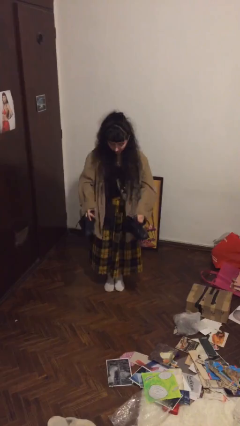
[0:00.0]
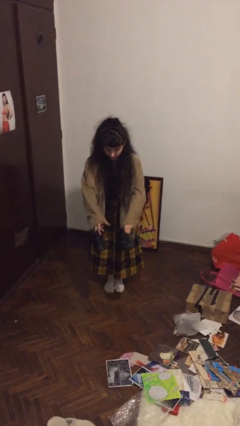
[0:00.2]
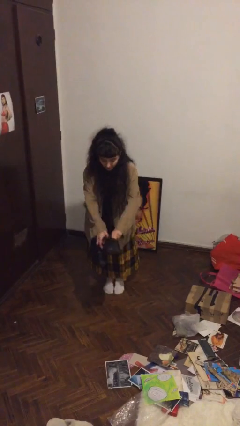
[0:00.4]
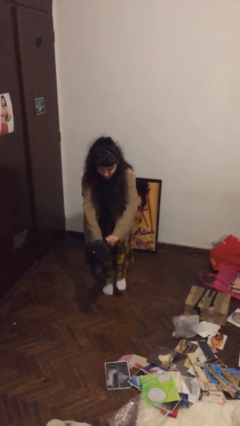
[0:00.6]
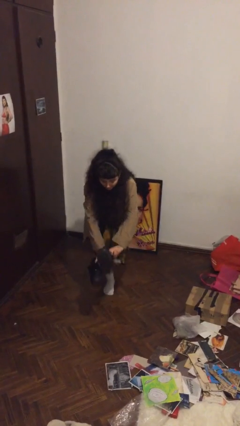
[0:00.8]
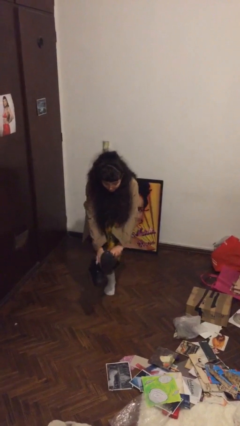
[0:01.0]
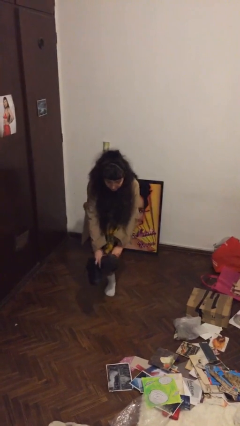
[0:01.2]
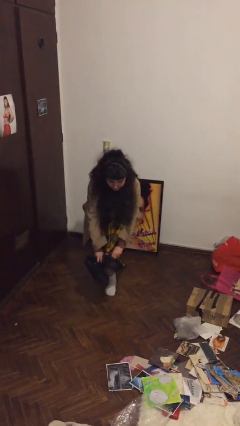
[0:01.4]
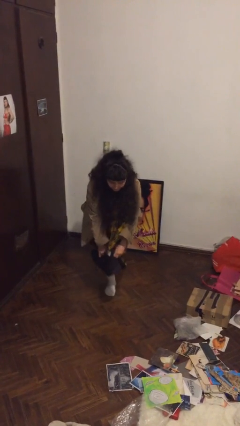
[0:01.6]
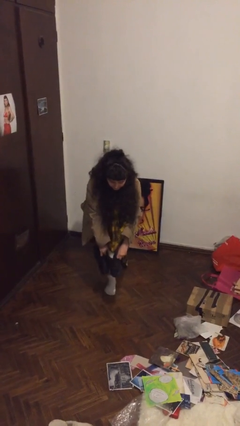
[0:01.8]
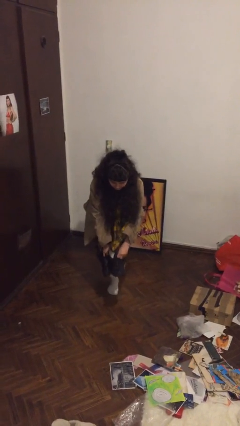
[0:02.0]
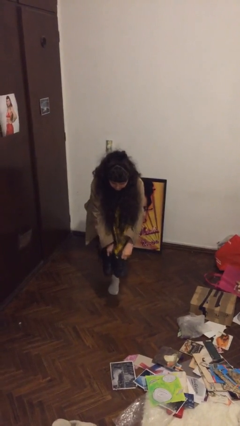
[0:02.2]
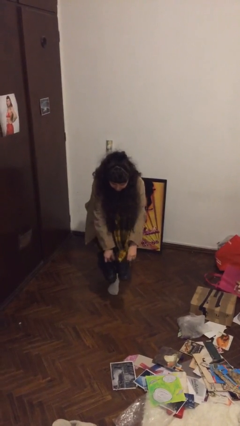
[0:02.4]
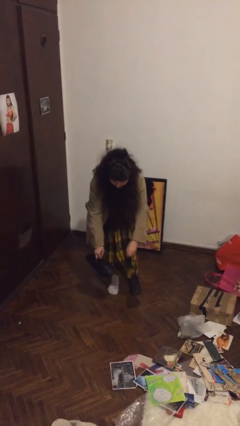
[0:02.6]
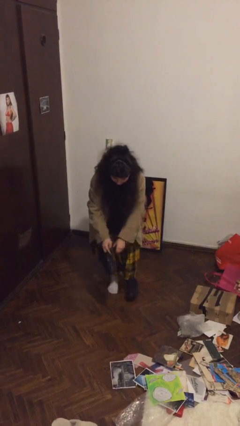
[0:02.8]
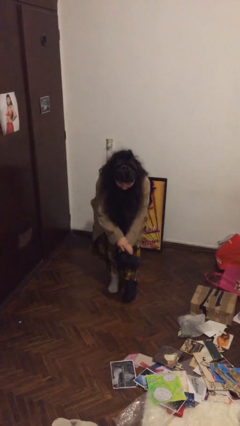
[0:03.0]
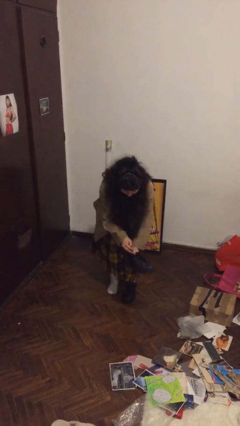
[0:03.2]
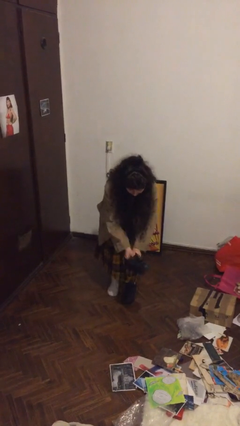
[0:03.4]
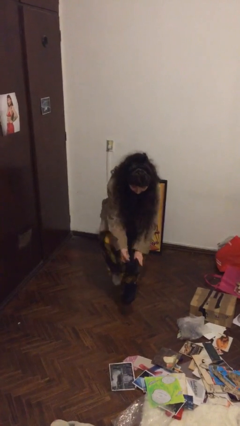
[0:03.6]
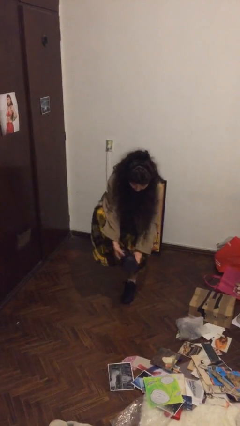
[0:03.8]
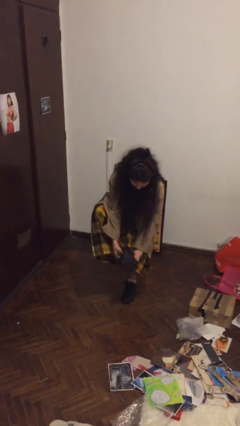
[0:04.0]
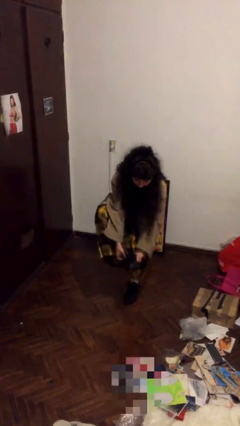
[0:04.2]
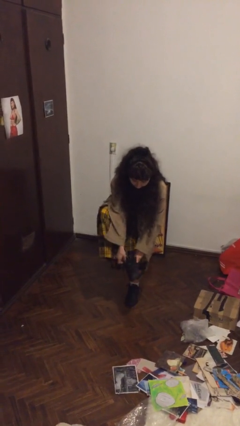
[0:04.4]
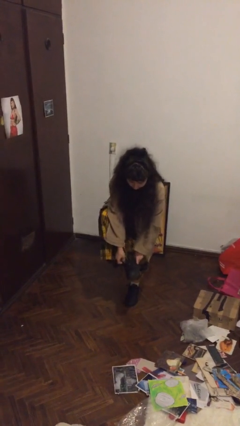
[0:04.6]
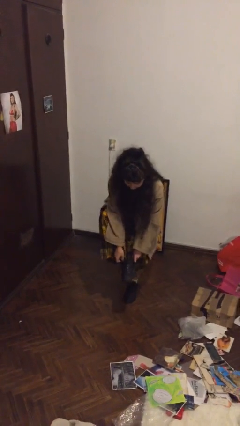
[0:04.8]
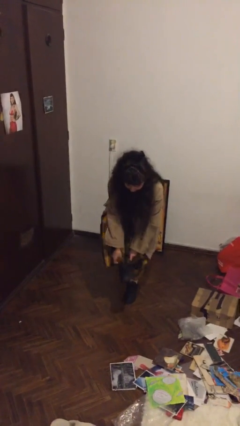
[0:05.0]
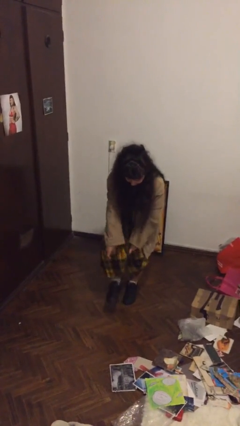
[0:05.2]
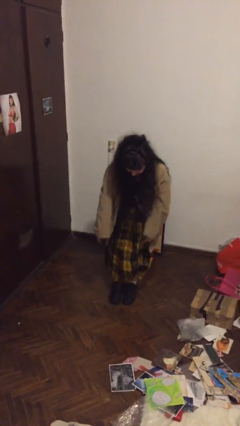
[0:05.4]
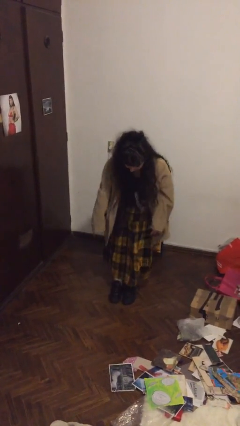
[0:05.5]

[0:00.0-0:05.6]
person puts on shoes

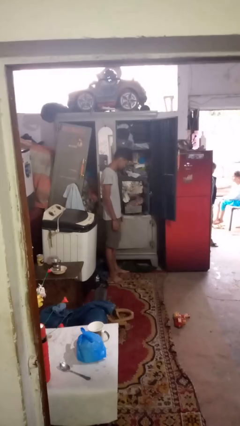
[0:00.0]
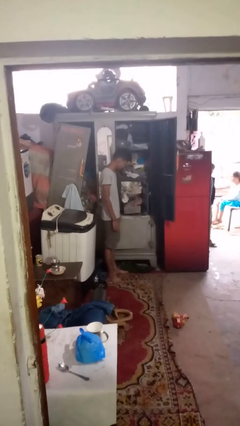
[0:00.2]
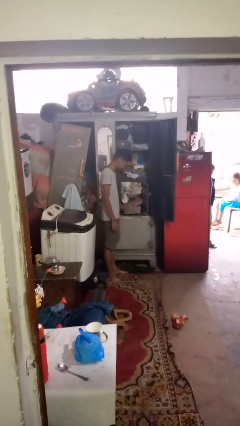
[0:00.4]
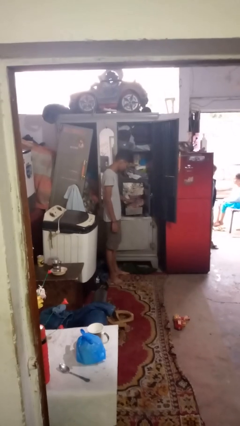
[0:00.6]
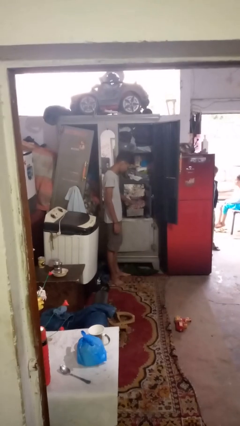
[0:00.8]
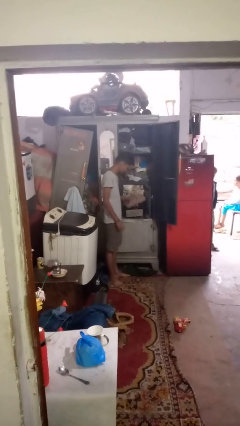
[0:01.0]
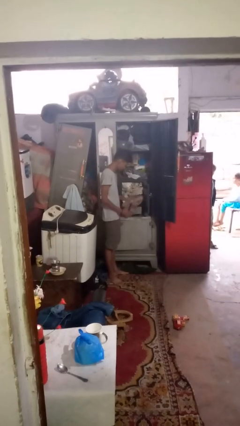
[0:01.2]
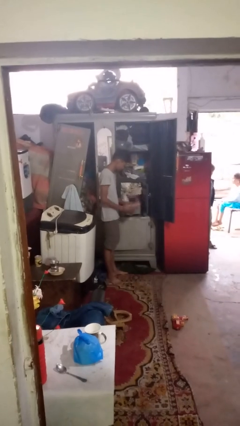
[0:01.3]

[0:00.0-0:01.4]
person takes clothes from dresser

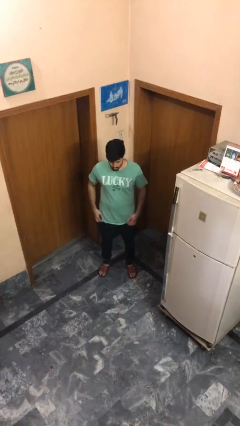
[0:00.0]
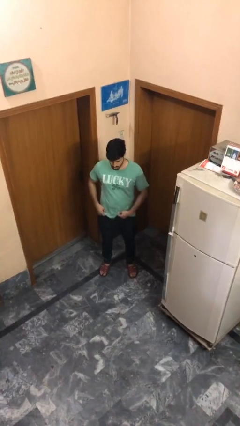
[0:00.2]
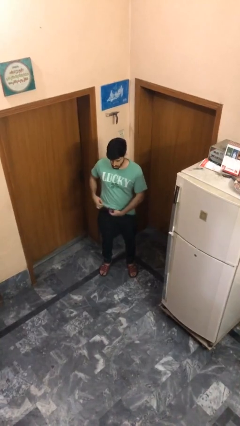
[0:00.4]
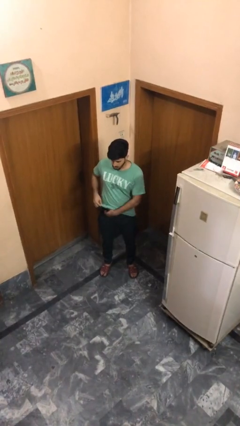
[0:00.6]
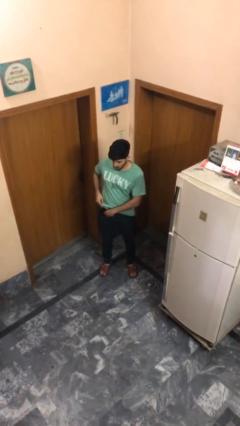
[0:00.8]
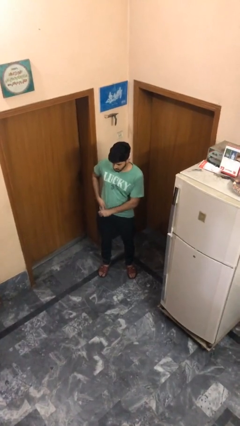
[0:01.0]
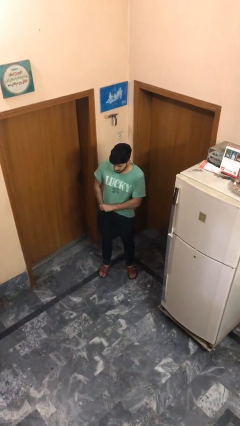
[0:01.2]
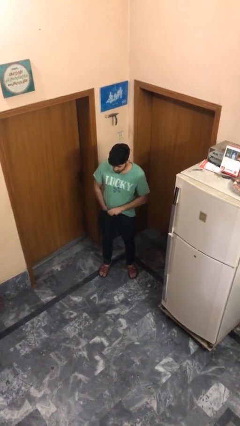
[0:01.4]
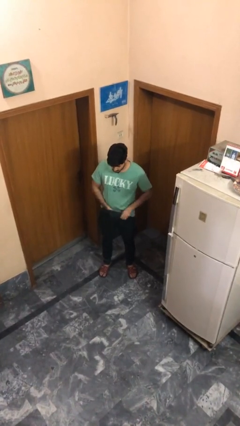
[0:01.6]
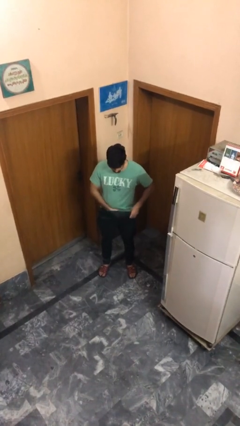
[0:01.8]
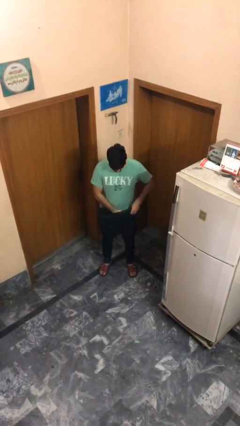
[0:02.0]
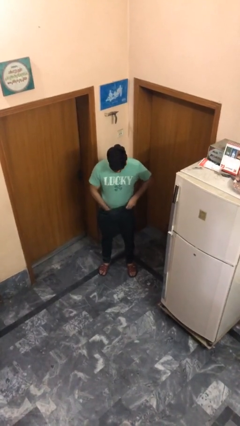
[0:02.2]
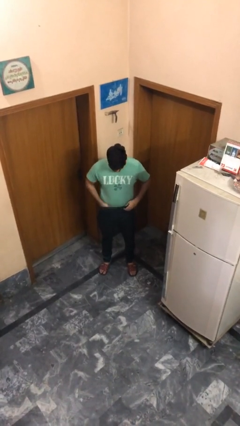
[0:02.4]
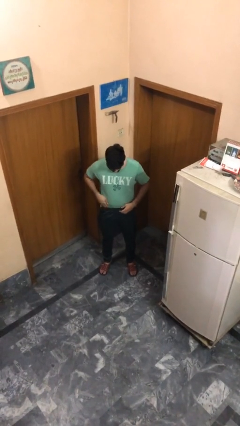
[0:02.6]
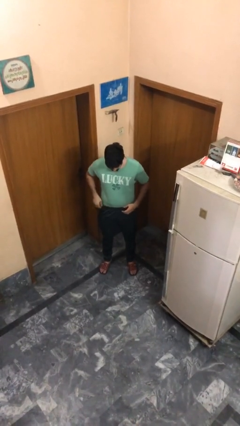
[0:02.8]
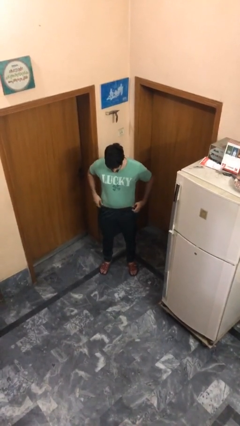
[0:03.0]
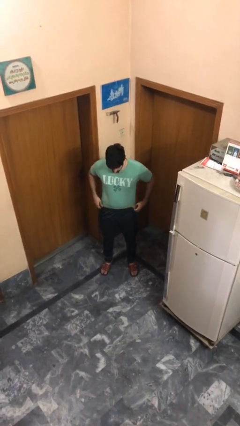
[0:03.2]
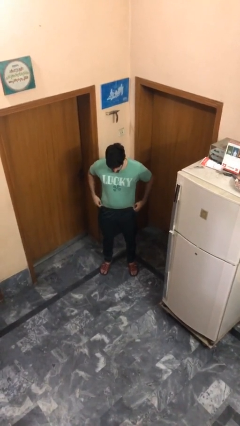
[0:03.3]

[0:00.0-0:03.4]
person tucks in shirt

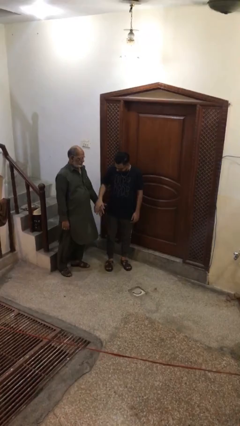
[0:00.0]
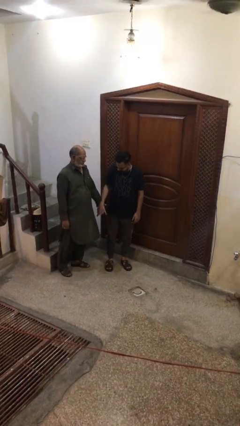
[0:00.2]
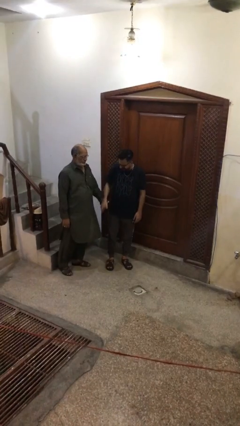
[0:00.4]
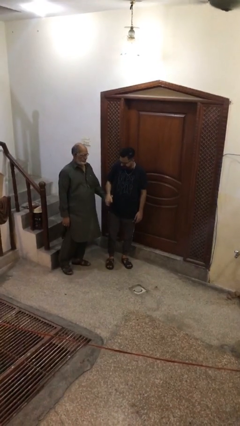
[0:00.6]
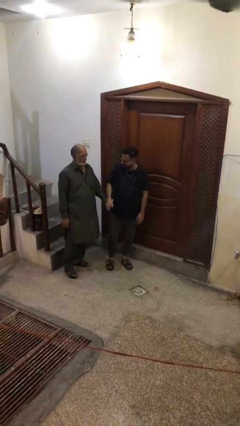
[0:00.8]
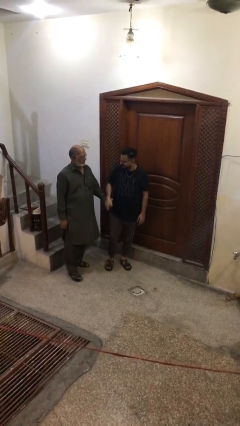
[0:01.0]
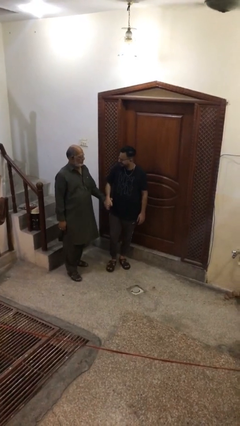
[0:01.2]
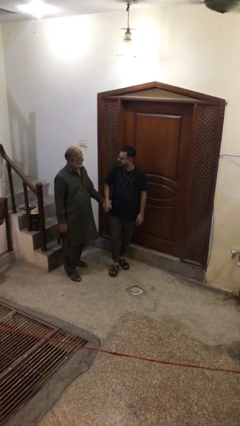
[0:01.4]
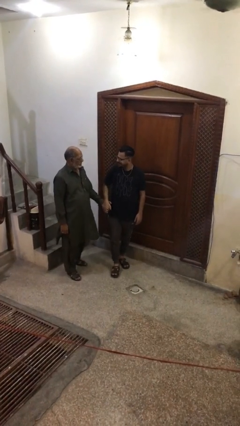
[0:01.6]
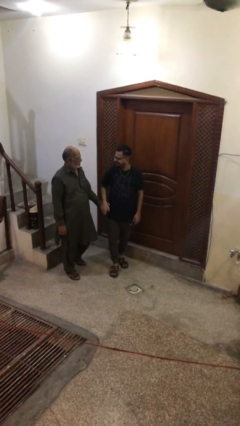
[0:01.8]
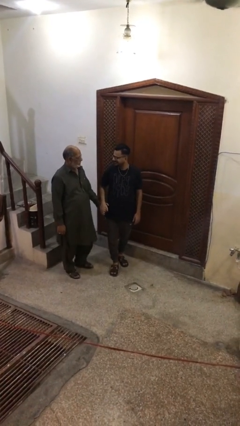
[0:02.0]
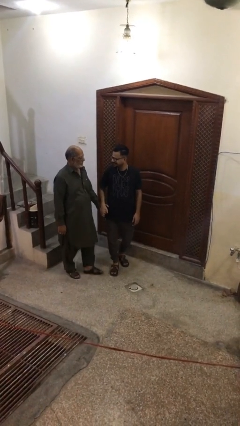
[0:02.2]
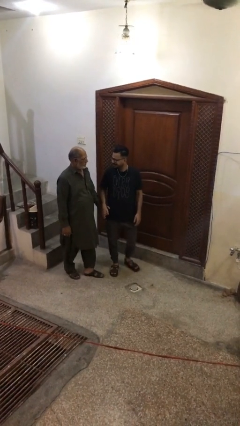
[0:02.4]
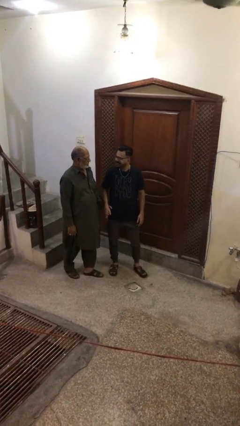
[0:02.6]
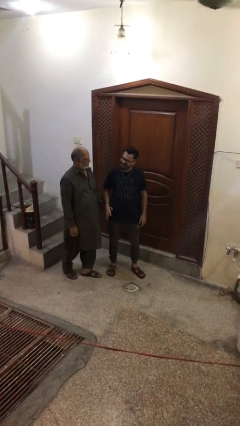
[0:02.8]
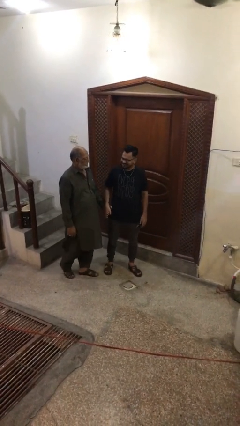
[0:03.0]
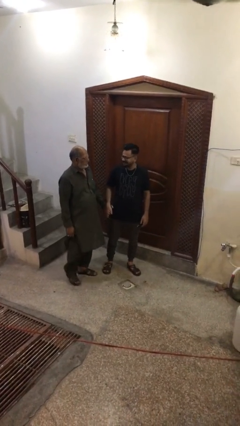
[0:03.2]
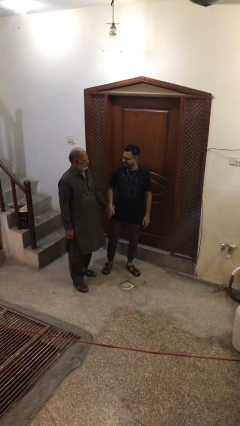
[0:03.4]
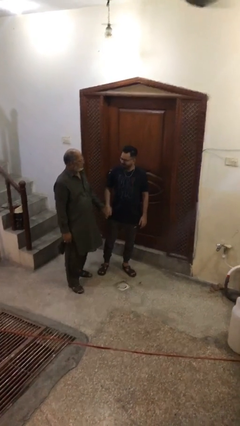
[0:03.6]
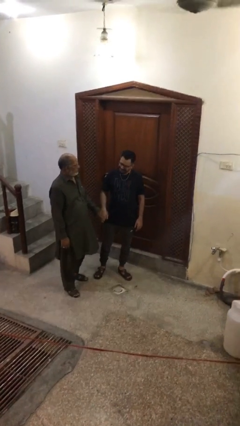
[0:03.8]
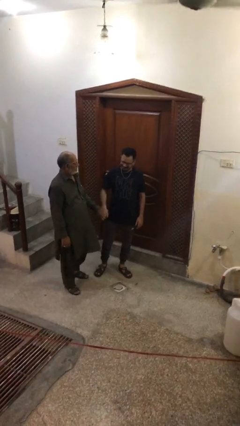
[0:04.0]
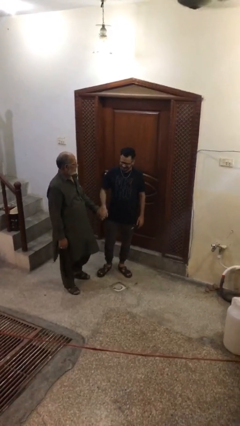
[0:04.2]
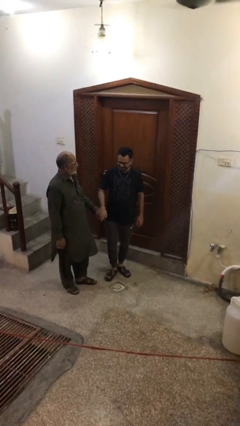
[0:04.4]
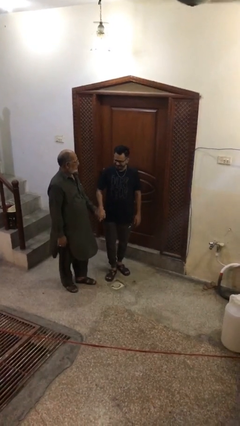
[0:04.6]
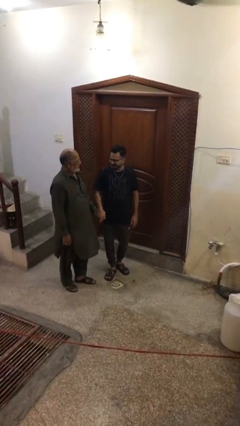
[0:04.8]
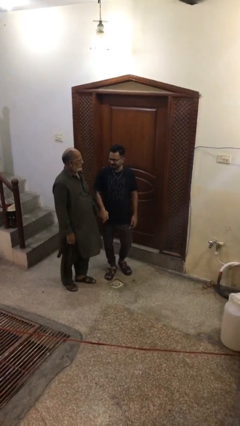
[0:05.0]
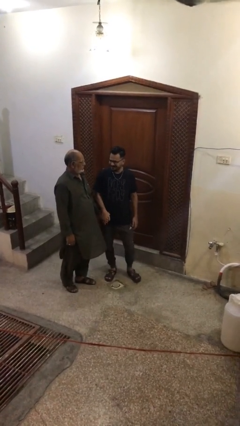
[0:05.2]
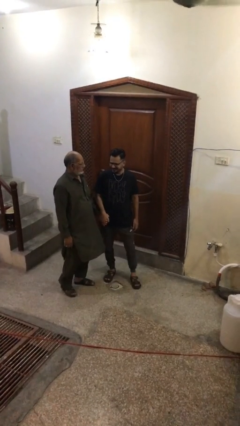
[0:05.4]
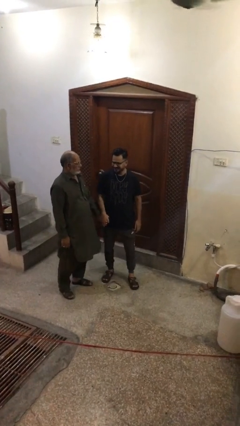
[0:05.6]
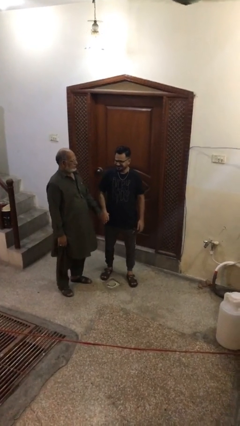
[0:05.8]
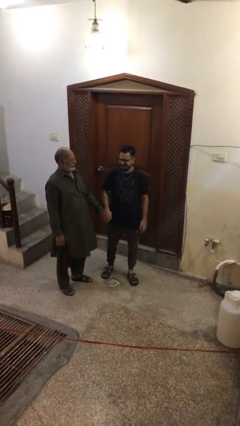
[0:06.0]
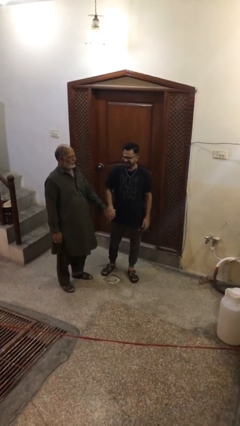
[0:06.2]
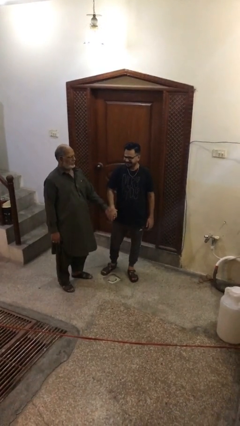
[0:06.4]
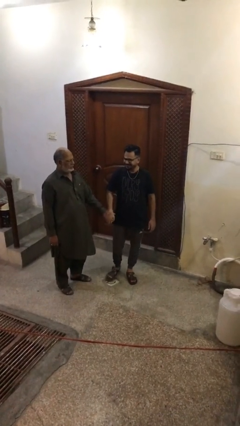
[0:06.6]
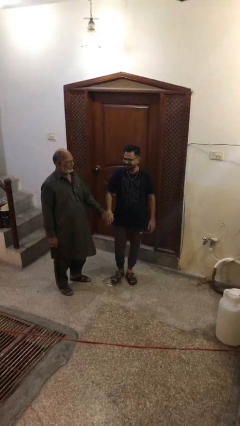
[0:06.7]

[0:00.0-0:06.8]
person holds hand

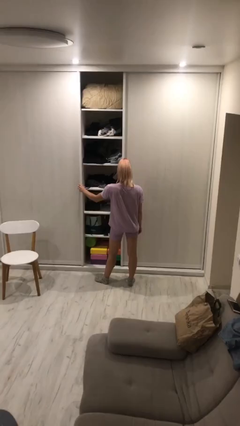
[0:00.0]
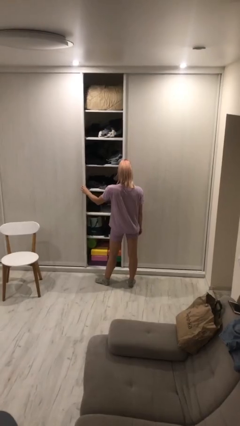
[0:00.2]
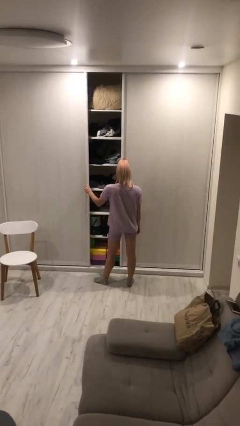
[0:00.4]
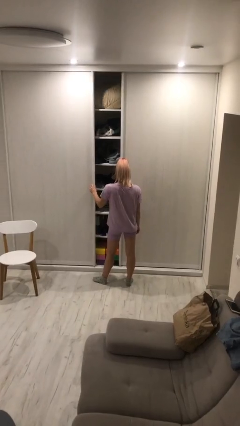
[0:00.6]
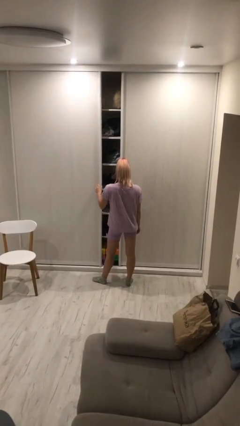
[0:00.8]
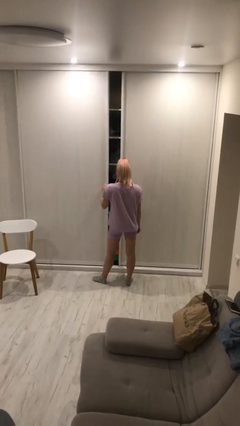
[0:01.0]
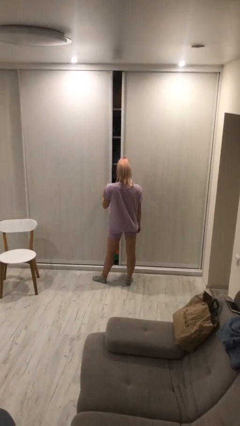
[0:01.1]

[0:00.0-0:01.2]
person closes sliding door
